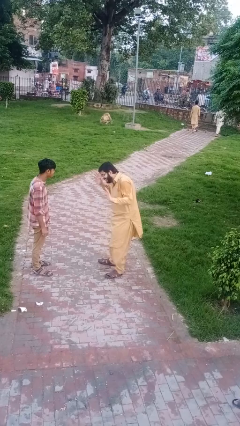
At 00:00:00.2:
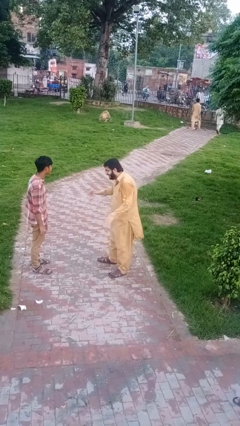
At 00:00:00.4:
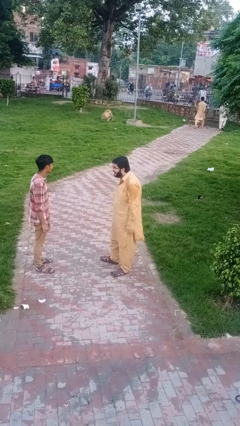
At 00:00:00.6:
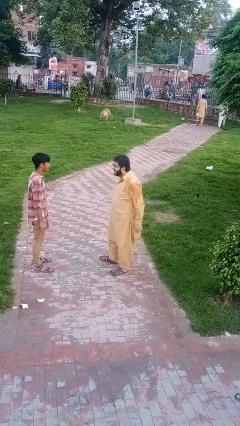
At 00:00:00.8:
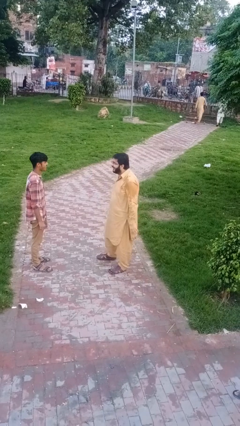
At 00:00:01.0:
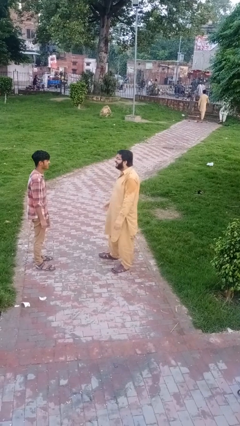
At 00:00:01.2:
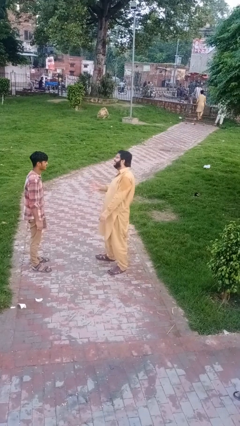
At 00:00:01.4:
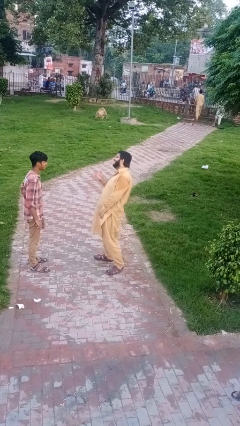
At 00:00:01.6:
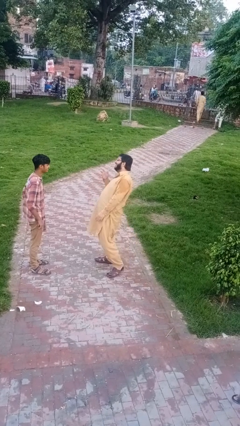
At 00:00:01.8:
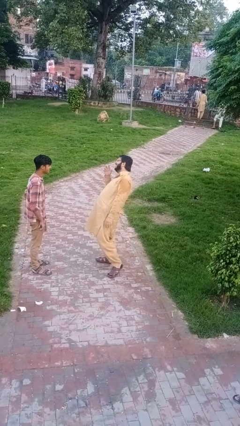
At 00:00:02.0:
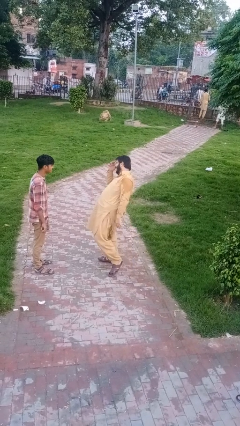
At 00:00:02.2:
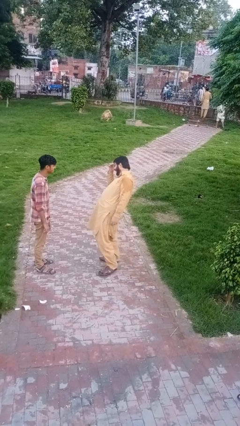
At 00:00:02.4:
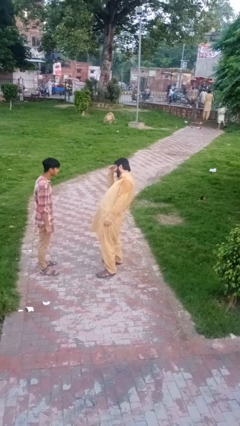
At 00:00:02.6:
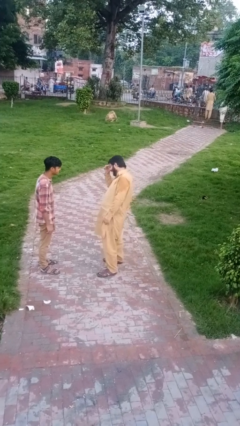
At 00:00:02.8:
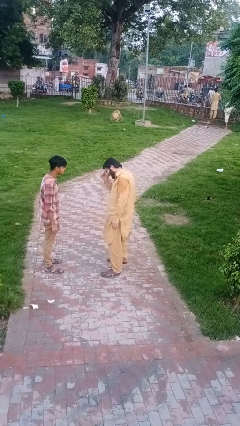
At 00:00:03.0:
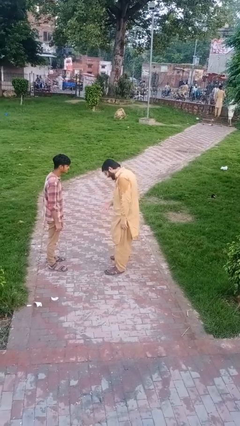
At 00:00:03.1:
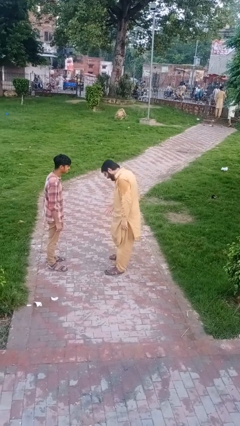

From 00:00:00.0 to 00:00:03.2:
person laughs with person

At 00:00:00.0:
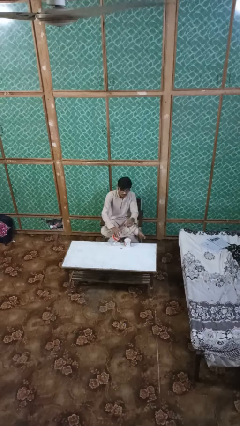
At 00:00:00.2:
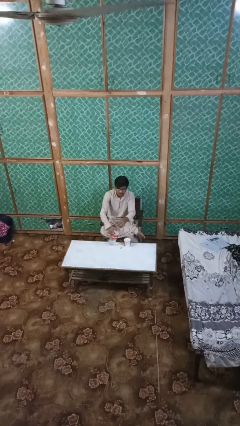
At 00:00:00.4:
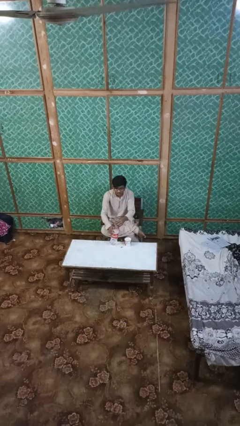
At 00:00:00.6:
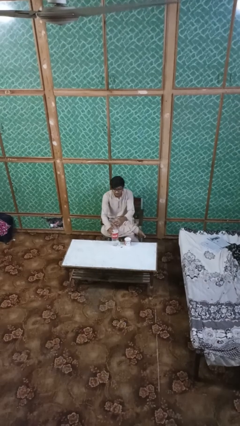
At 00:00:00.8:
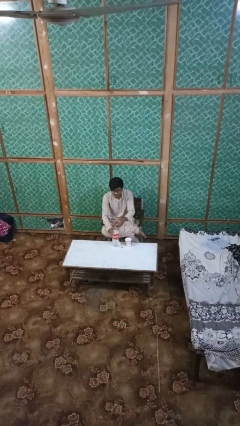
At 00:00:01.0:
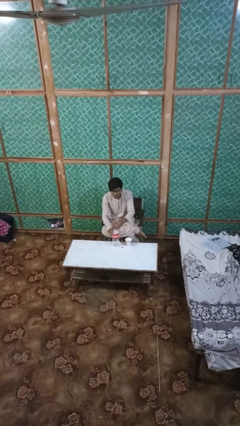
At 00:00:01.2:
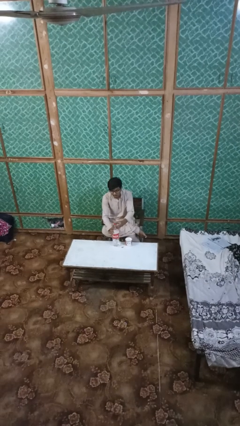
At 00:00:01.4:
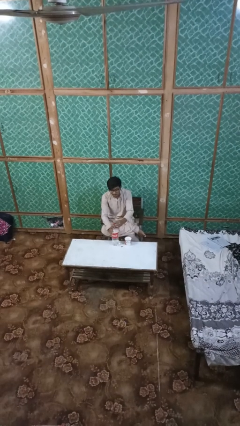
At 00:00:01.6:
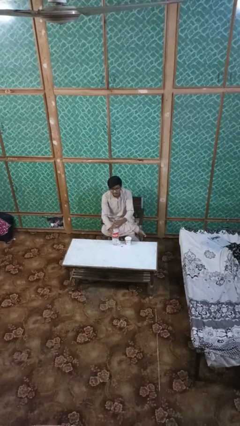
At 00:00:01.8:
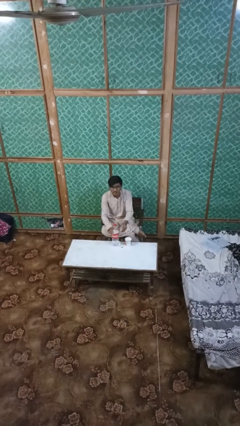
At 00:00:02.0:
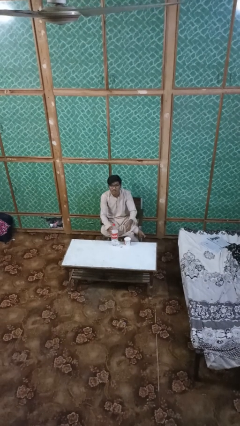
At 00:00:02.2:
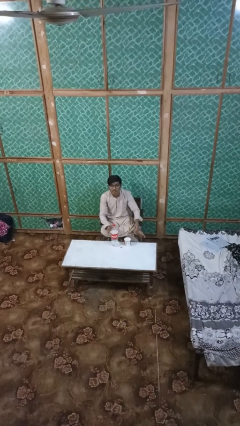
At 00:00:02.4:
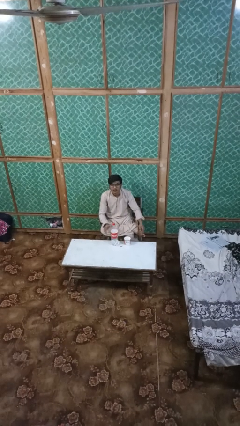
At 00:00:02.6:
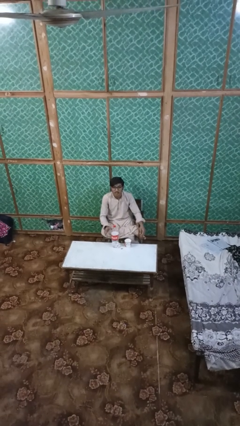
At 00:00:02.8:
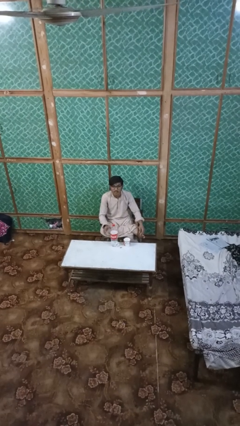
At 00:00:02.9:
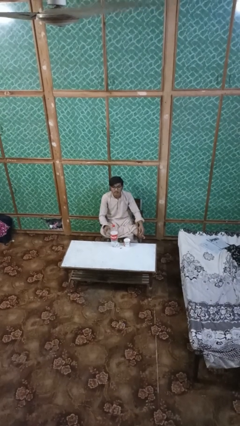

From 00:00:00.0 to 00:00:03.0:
person screws lid to bottle

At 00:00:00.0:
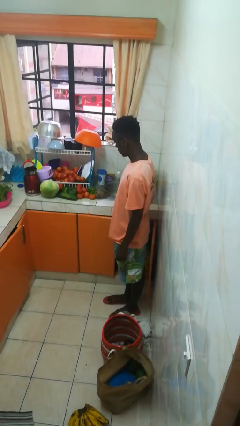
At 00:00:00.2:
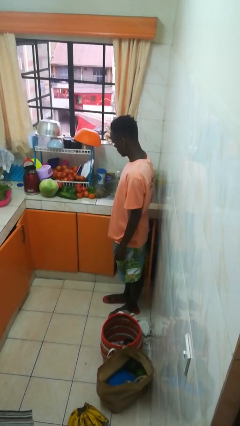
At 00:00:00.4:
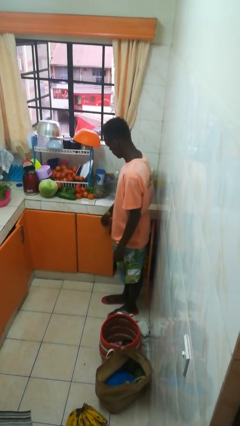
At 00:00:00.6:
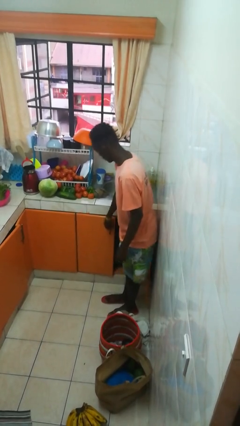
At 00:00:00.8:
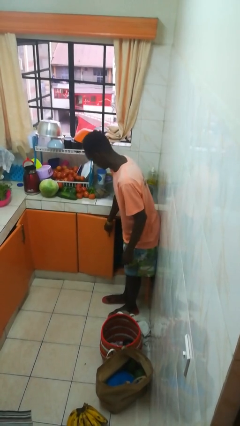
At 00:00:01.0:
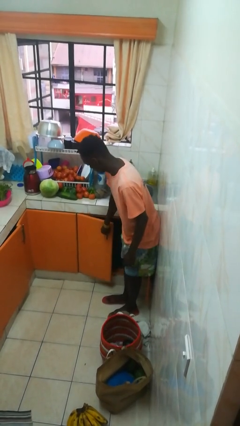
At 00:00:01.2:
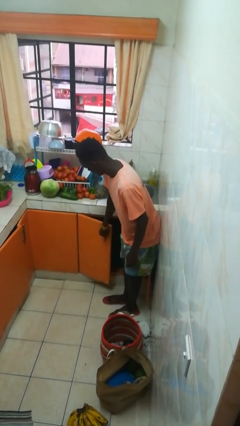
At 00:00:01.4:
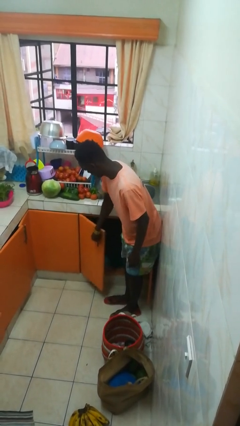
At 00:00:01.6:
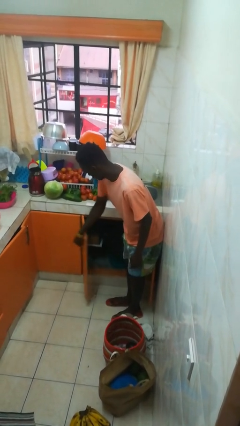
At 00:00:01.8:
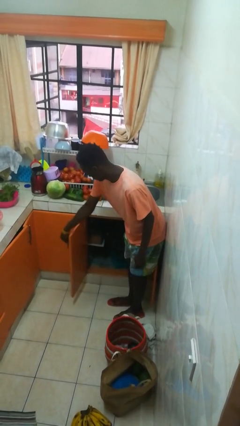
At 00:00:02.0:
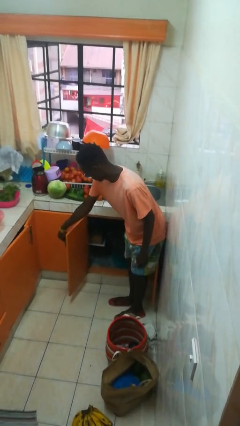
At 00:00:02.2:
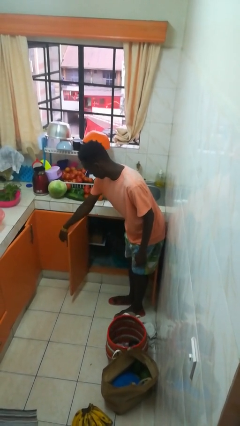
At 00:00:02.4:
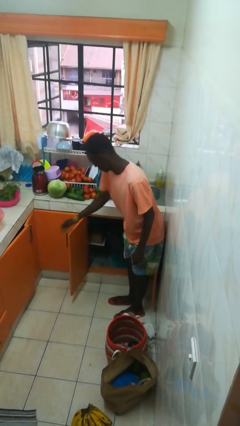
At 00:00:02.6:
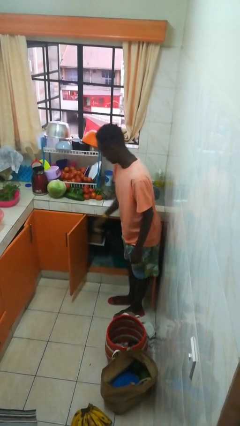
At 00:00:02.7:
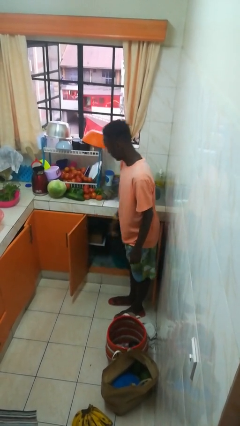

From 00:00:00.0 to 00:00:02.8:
person opens cabinet

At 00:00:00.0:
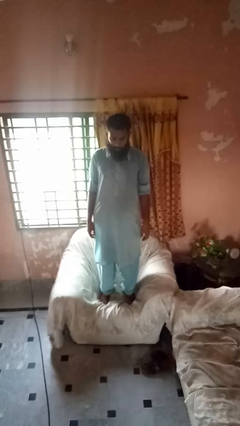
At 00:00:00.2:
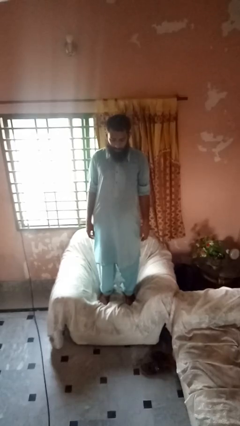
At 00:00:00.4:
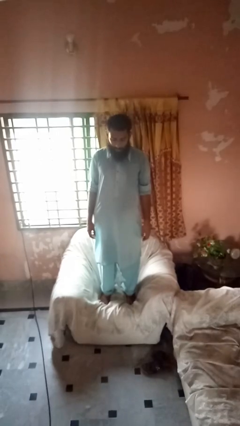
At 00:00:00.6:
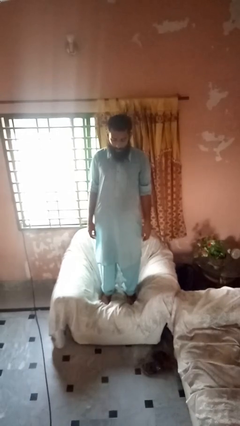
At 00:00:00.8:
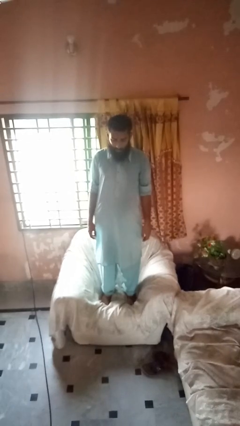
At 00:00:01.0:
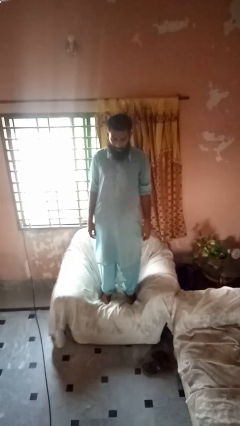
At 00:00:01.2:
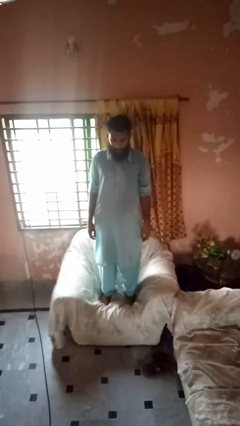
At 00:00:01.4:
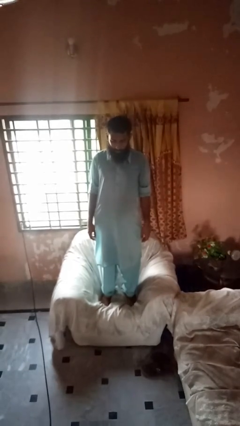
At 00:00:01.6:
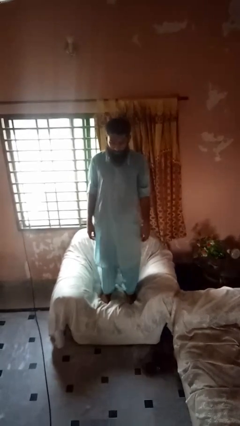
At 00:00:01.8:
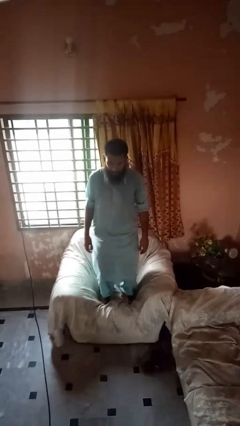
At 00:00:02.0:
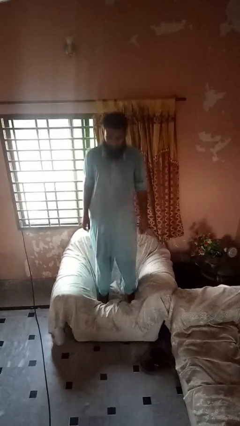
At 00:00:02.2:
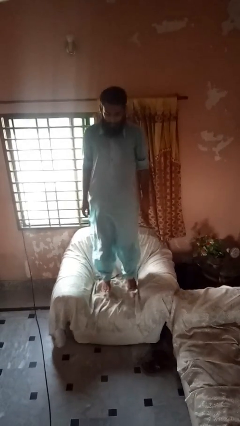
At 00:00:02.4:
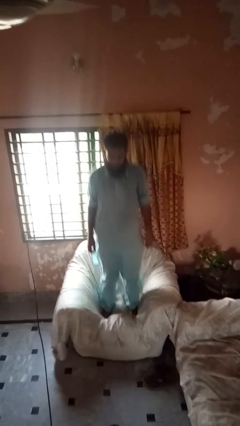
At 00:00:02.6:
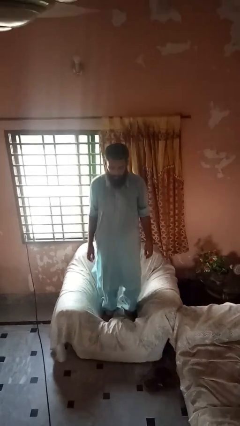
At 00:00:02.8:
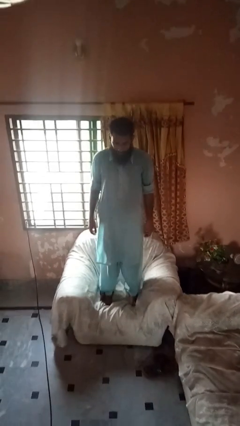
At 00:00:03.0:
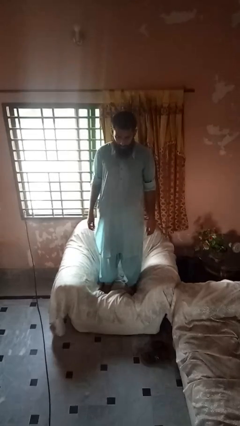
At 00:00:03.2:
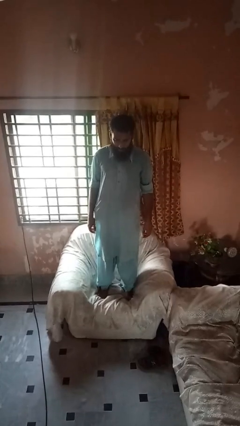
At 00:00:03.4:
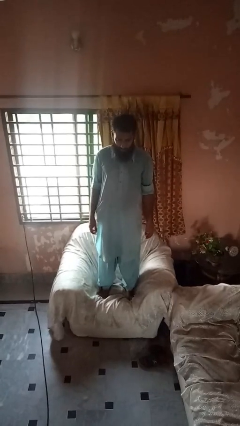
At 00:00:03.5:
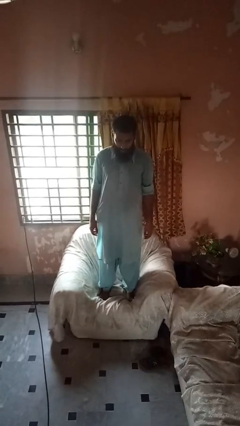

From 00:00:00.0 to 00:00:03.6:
person jumps on couch

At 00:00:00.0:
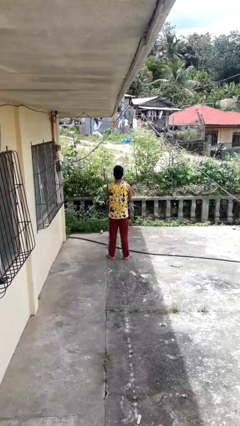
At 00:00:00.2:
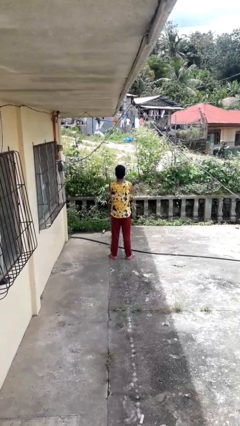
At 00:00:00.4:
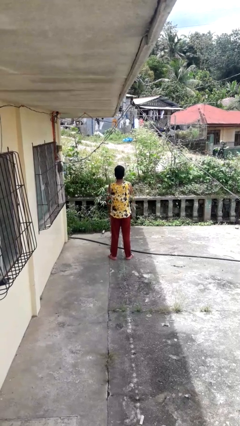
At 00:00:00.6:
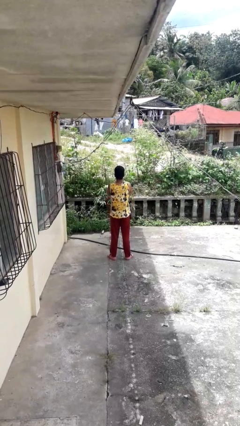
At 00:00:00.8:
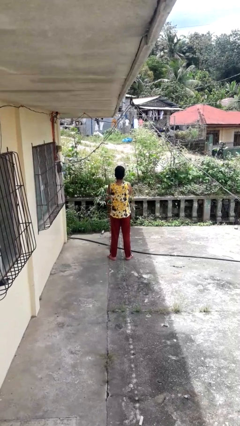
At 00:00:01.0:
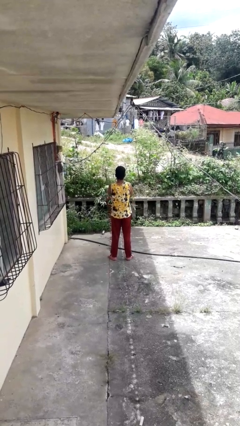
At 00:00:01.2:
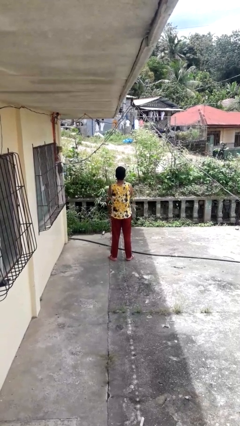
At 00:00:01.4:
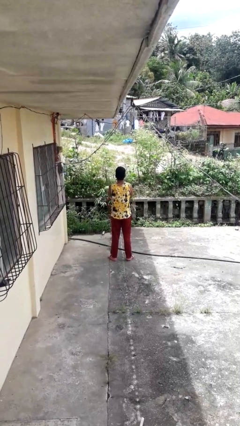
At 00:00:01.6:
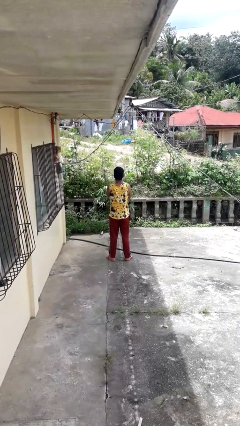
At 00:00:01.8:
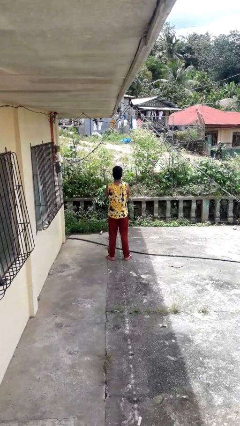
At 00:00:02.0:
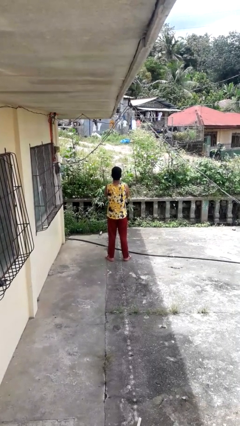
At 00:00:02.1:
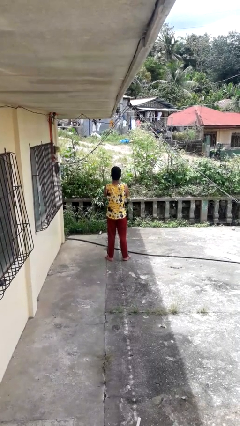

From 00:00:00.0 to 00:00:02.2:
person crosses arms

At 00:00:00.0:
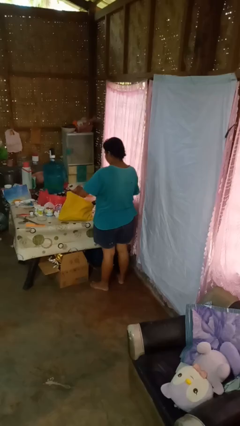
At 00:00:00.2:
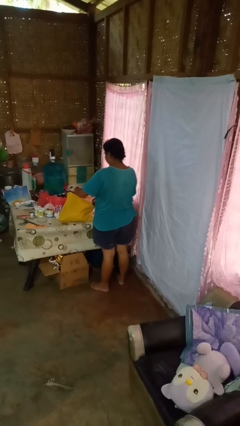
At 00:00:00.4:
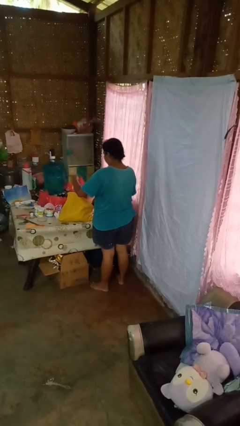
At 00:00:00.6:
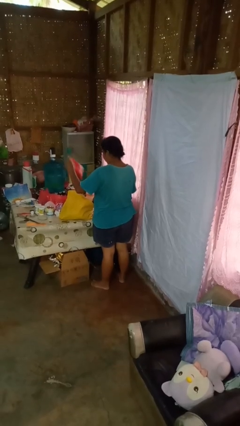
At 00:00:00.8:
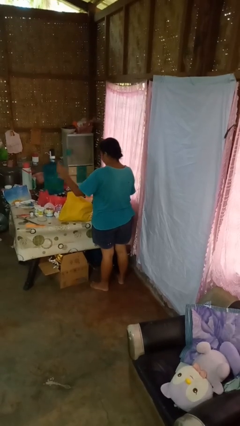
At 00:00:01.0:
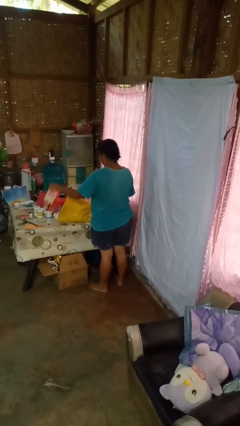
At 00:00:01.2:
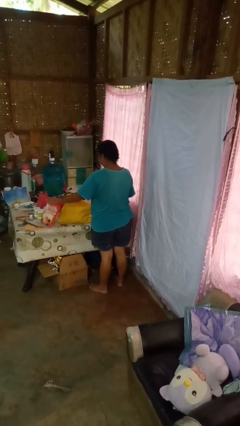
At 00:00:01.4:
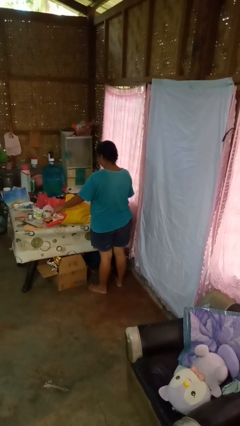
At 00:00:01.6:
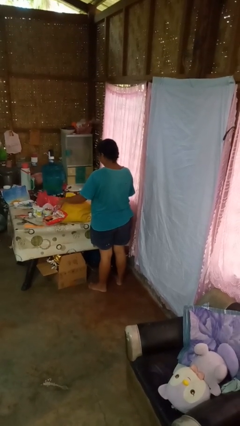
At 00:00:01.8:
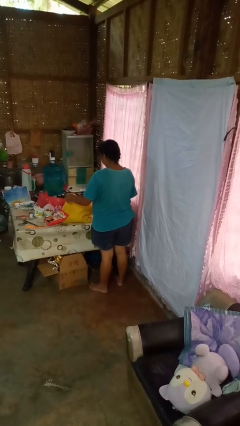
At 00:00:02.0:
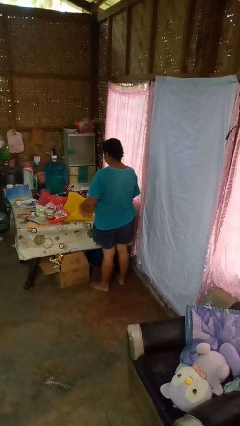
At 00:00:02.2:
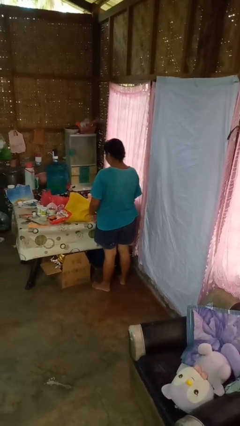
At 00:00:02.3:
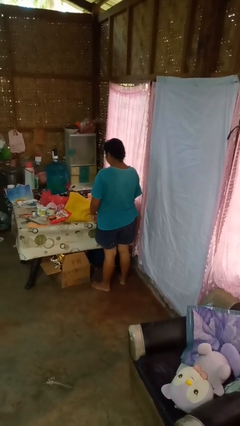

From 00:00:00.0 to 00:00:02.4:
person takes object from bag
